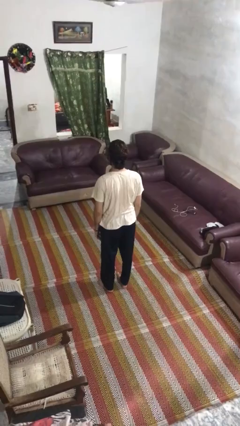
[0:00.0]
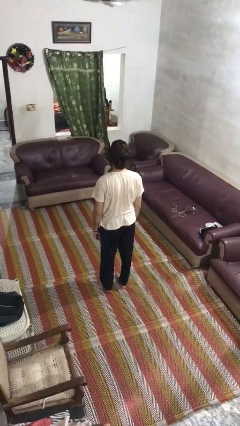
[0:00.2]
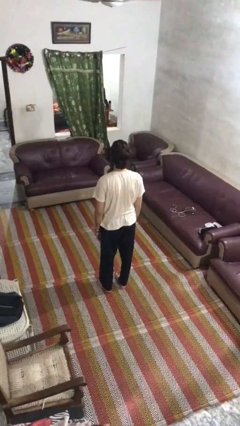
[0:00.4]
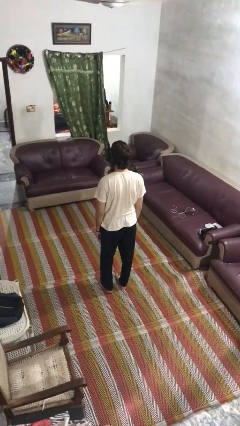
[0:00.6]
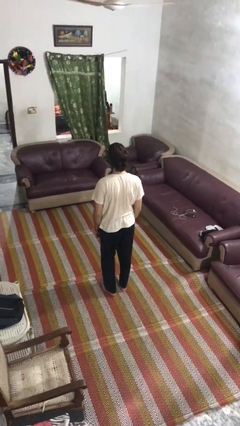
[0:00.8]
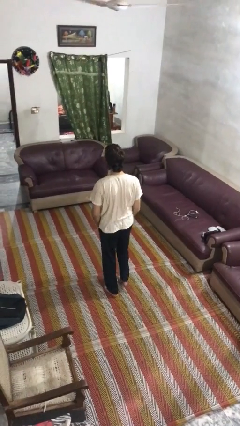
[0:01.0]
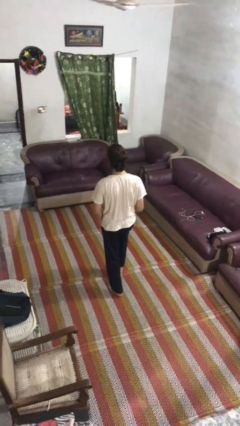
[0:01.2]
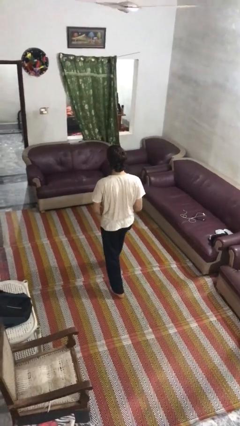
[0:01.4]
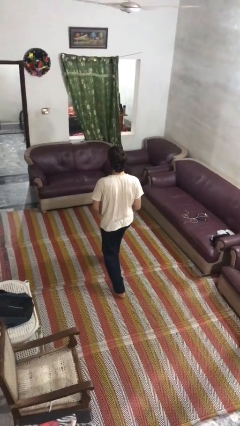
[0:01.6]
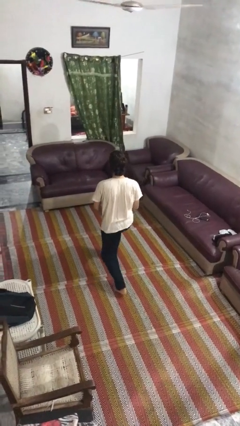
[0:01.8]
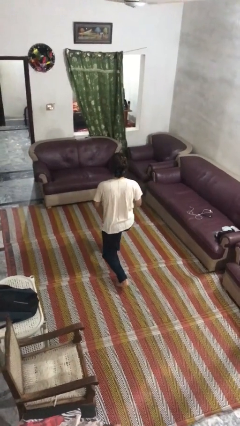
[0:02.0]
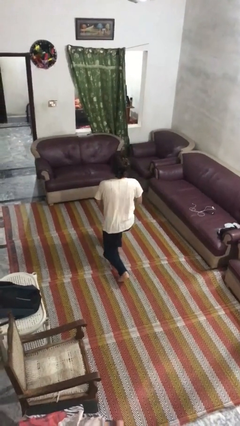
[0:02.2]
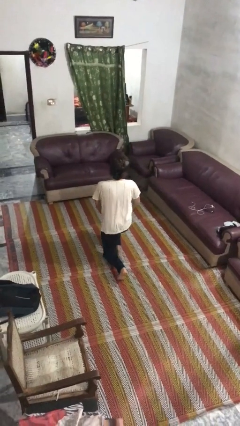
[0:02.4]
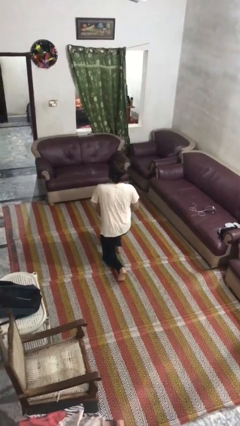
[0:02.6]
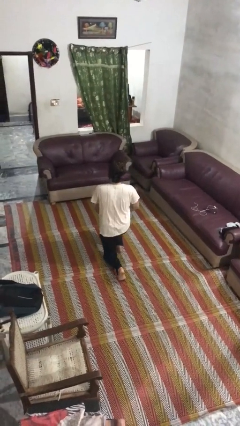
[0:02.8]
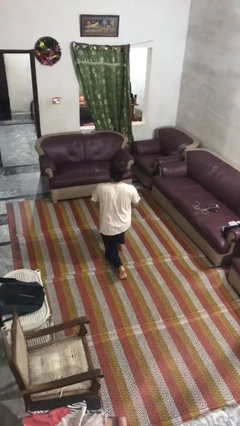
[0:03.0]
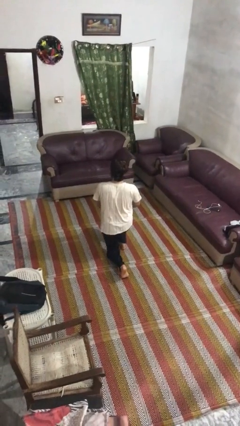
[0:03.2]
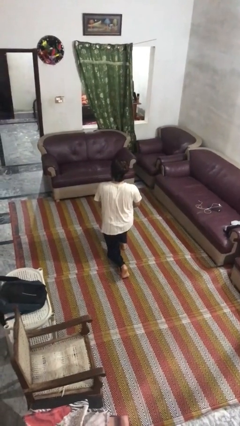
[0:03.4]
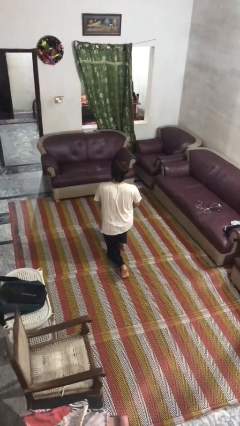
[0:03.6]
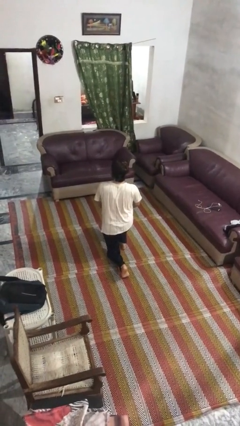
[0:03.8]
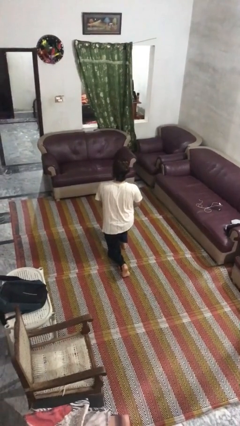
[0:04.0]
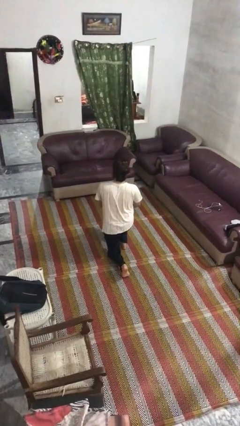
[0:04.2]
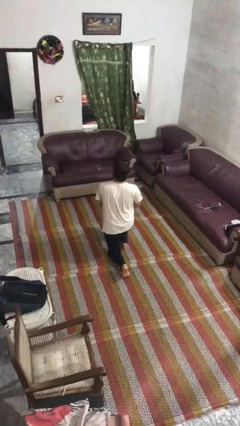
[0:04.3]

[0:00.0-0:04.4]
person kneels

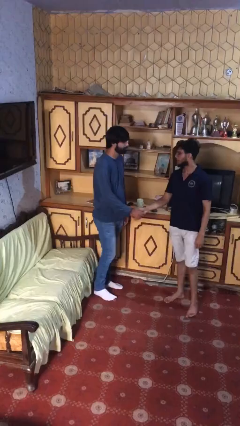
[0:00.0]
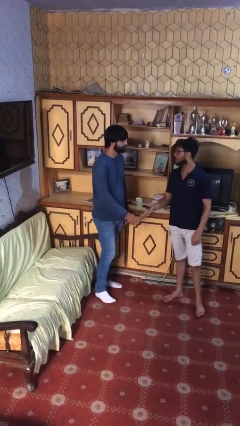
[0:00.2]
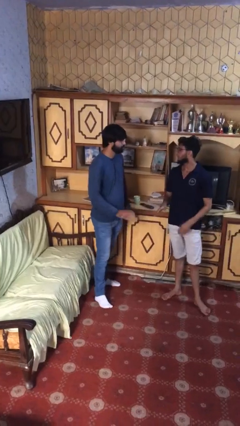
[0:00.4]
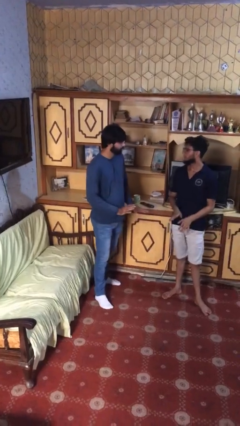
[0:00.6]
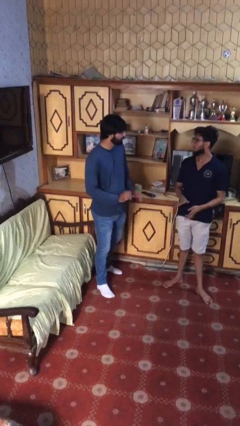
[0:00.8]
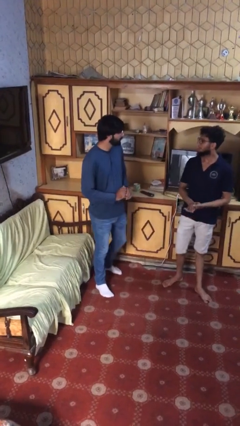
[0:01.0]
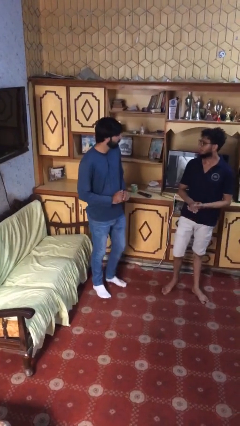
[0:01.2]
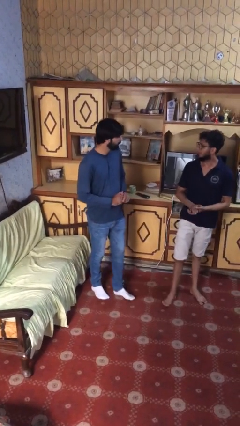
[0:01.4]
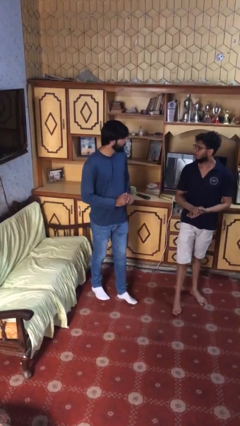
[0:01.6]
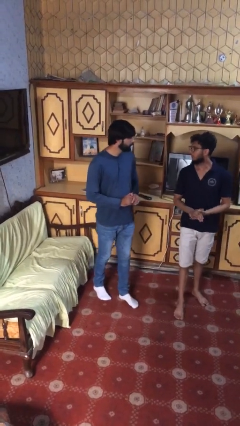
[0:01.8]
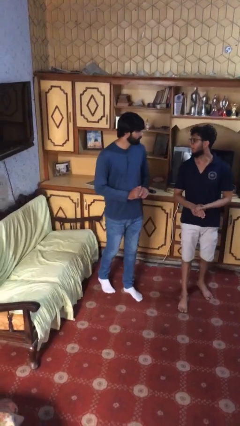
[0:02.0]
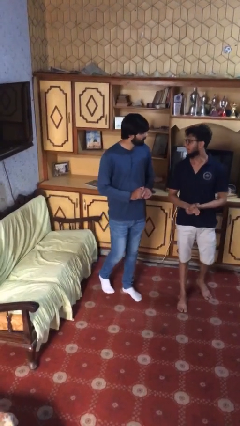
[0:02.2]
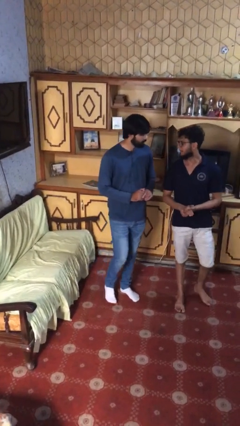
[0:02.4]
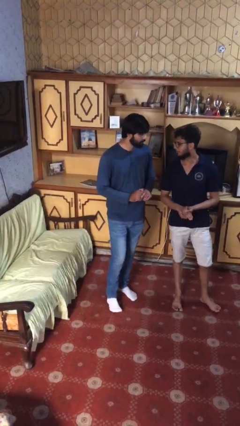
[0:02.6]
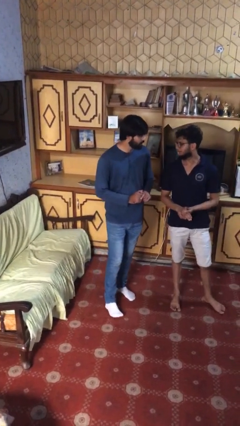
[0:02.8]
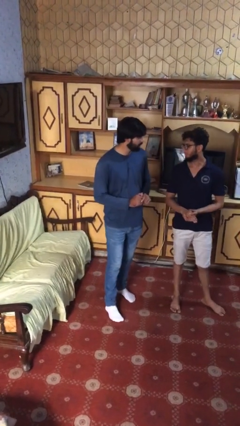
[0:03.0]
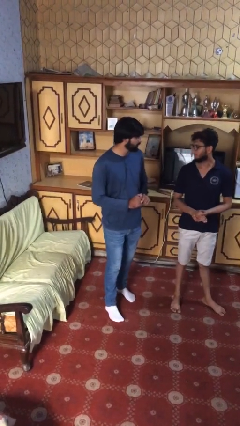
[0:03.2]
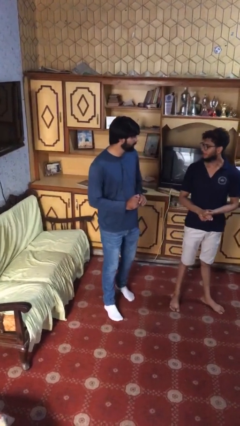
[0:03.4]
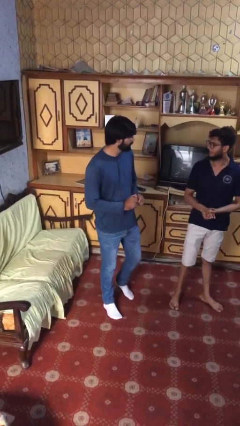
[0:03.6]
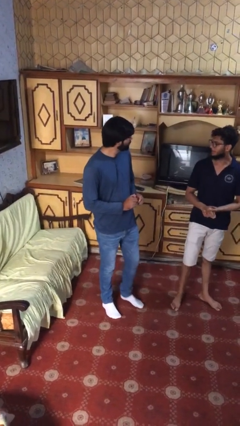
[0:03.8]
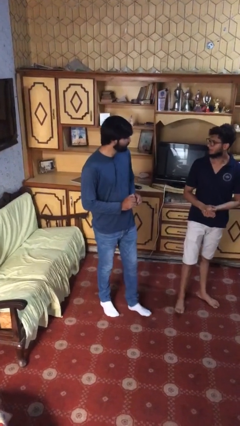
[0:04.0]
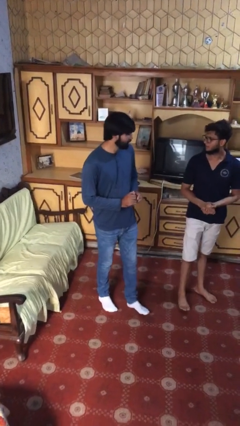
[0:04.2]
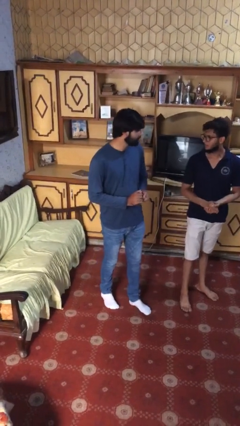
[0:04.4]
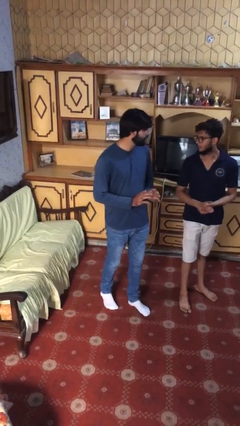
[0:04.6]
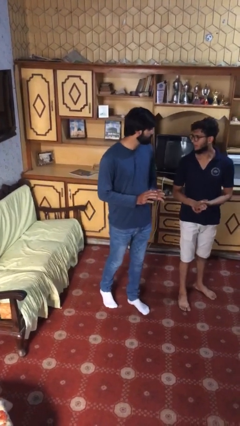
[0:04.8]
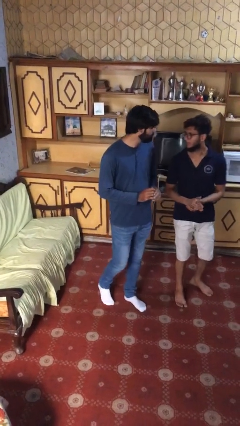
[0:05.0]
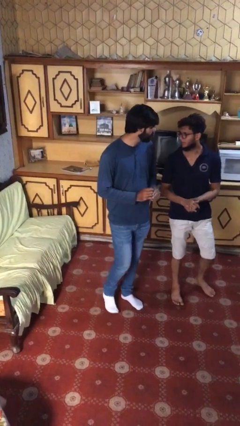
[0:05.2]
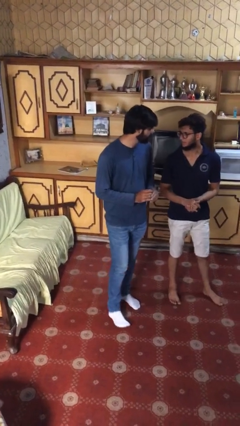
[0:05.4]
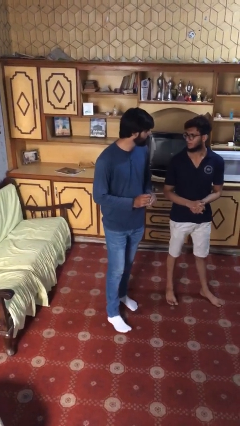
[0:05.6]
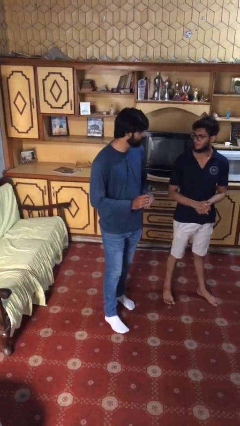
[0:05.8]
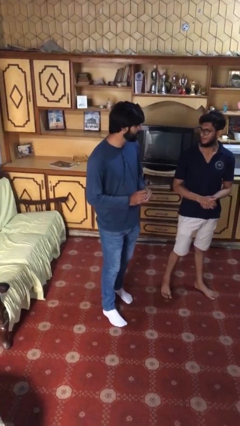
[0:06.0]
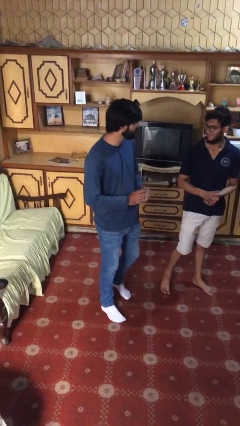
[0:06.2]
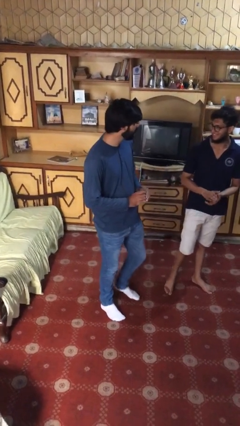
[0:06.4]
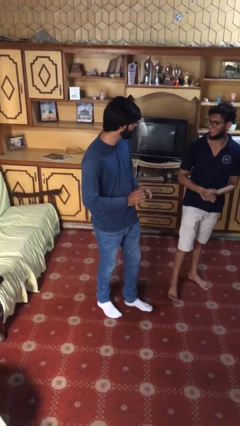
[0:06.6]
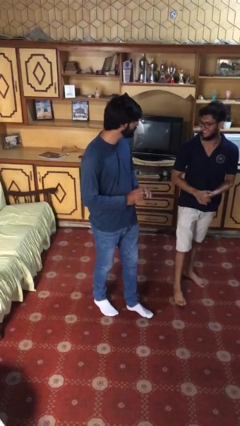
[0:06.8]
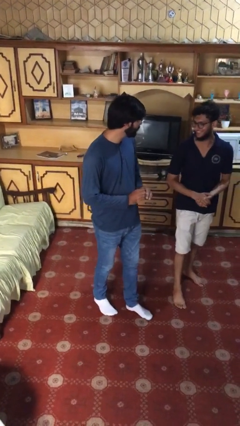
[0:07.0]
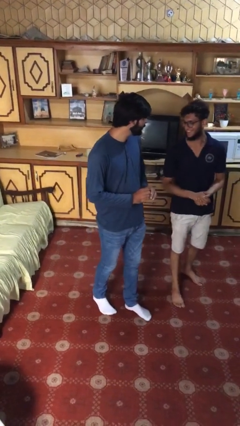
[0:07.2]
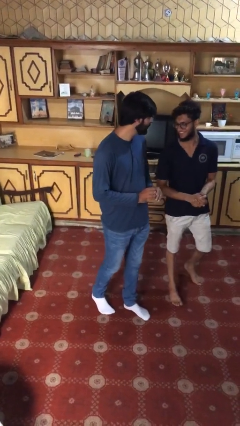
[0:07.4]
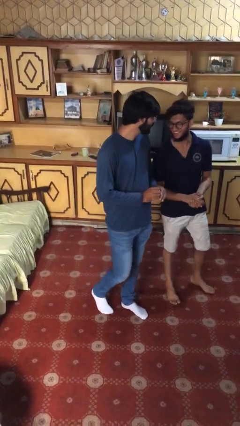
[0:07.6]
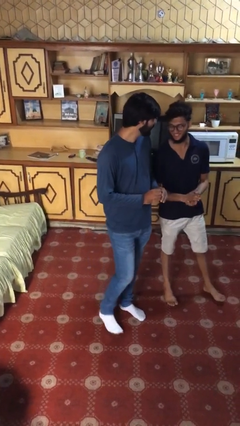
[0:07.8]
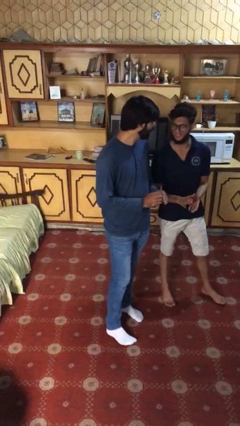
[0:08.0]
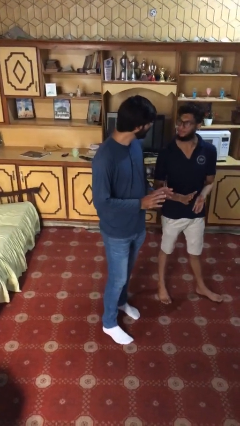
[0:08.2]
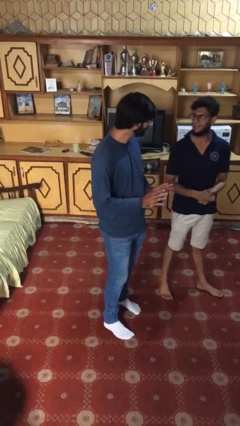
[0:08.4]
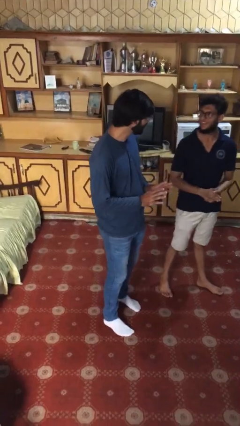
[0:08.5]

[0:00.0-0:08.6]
person talks to person

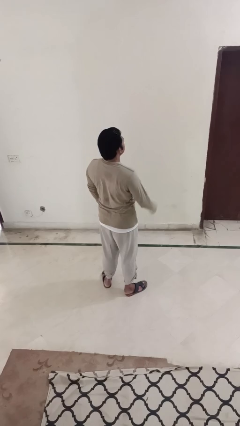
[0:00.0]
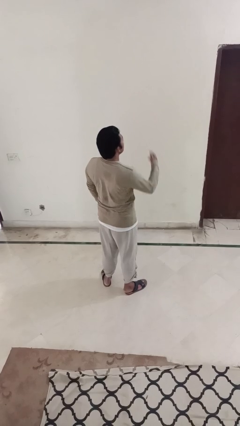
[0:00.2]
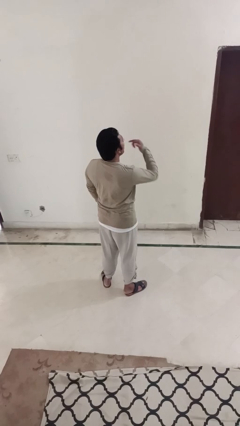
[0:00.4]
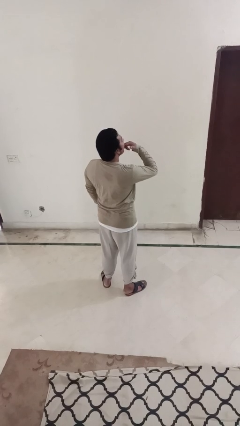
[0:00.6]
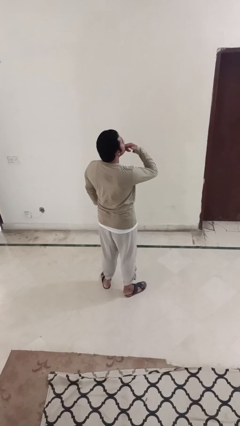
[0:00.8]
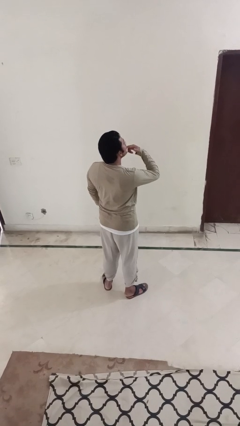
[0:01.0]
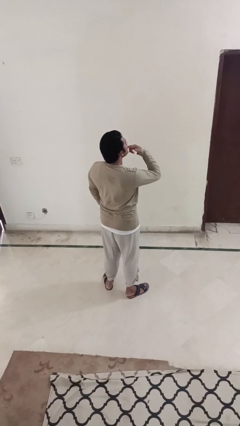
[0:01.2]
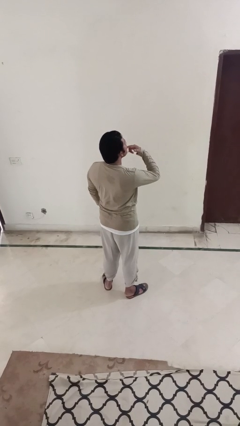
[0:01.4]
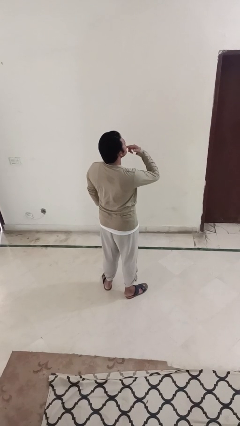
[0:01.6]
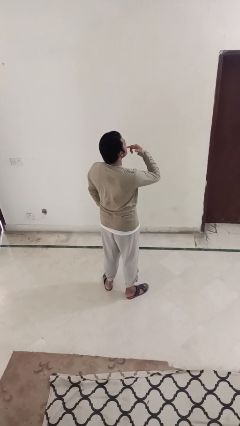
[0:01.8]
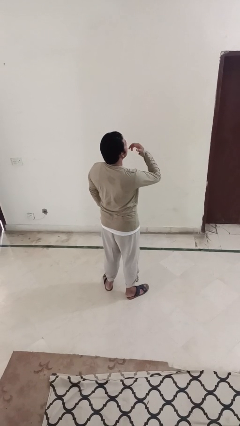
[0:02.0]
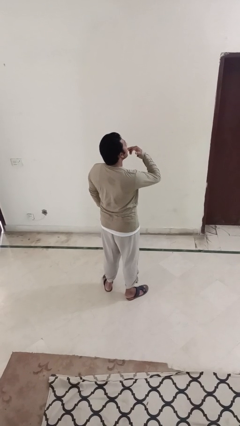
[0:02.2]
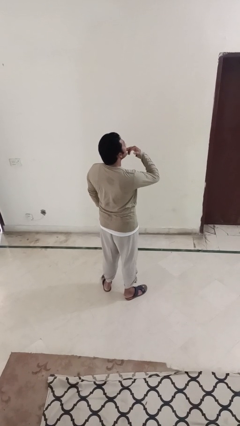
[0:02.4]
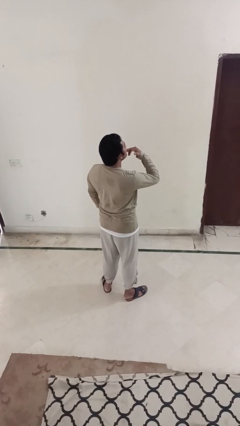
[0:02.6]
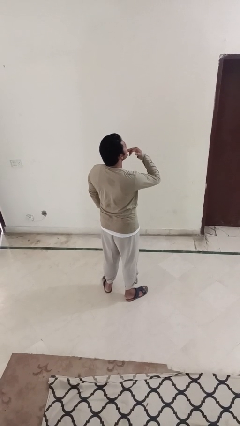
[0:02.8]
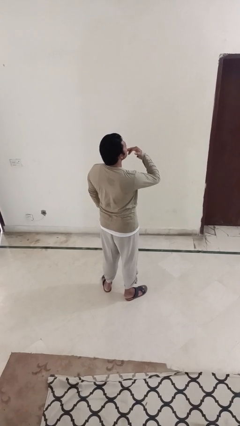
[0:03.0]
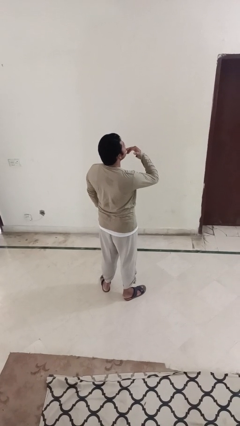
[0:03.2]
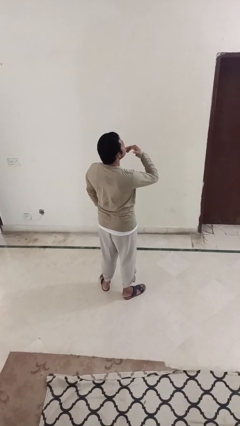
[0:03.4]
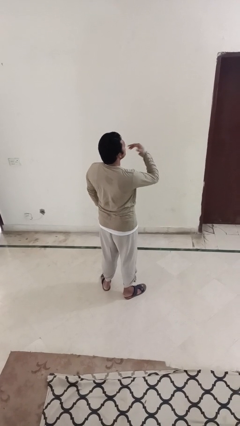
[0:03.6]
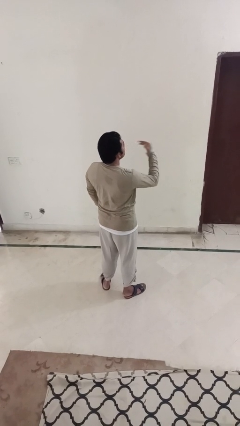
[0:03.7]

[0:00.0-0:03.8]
person licks fingers

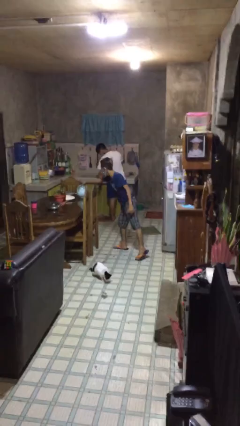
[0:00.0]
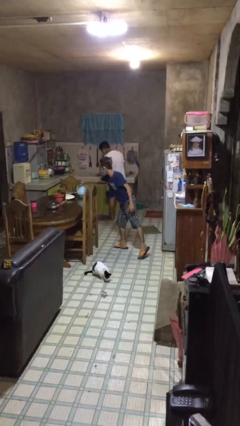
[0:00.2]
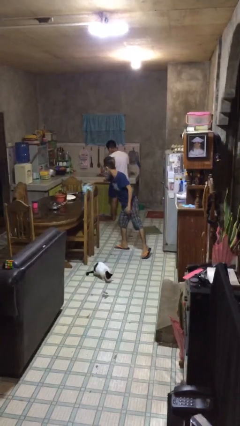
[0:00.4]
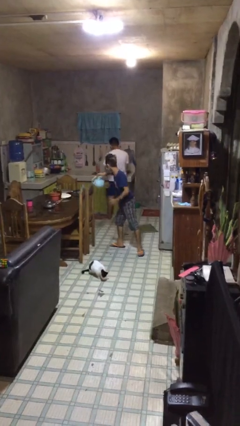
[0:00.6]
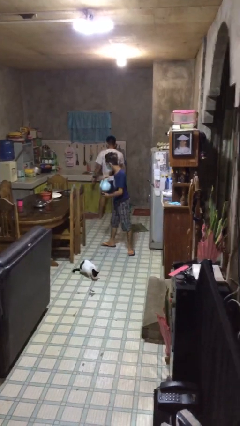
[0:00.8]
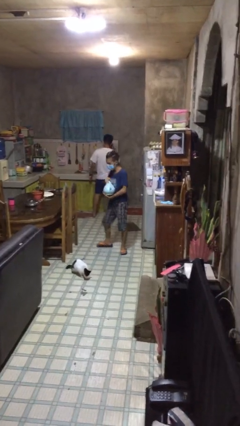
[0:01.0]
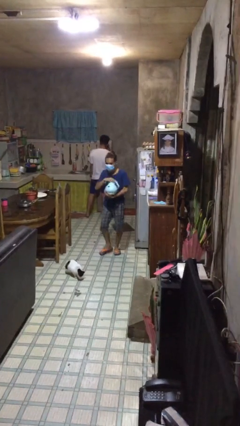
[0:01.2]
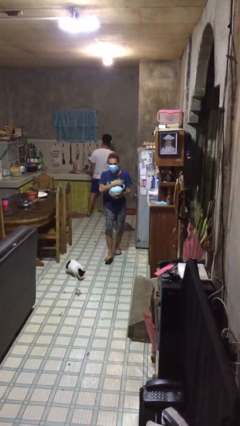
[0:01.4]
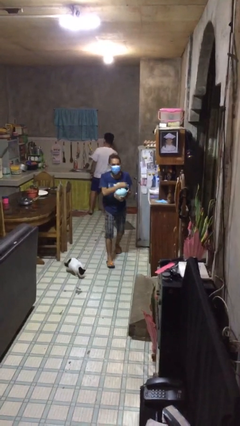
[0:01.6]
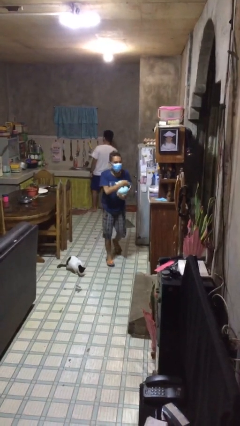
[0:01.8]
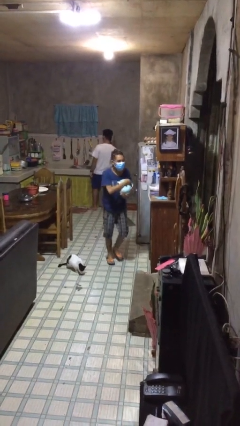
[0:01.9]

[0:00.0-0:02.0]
person steals object from person
